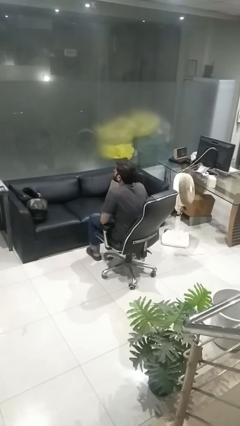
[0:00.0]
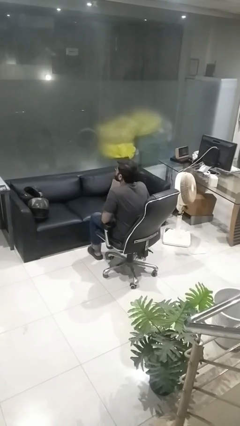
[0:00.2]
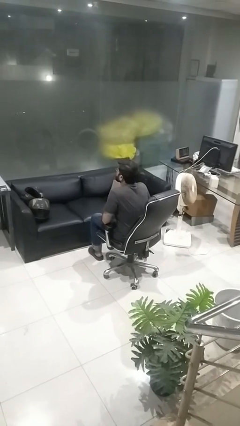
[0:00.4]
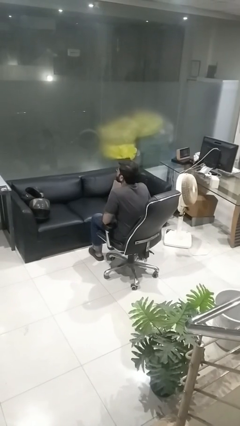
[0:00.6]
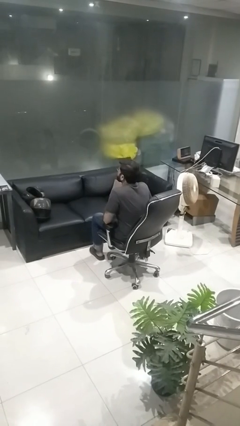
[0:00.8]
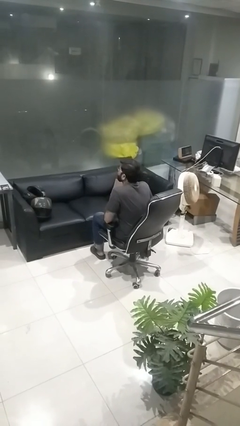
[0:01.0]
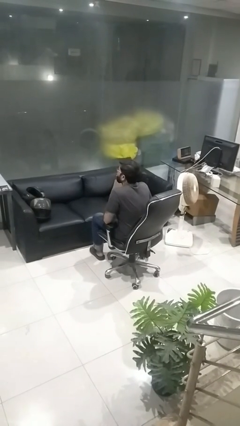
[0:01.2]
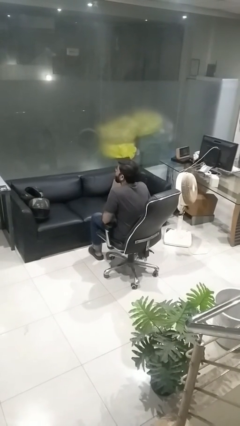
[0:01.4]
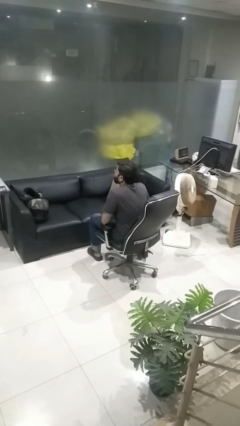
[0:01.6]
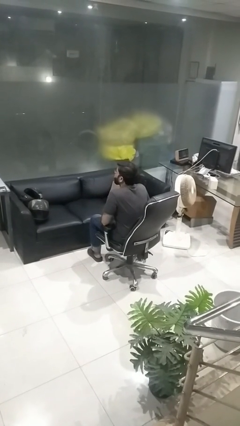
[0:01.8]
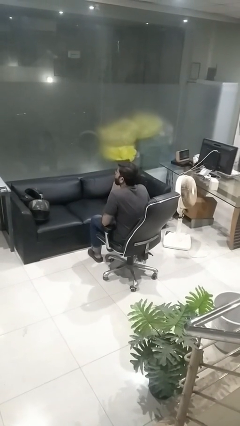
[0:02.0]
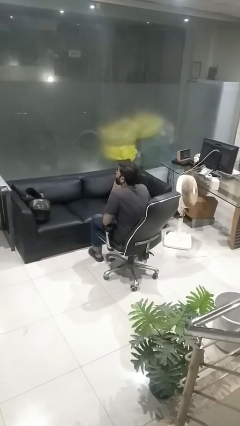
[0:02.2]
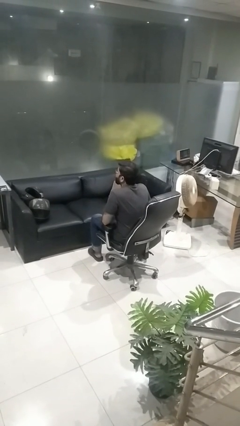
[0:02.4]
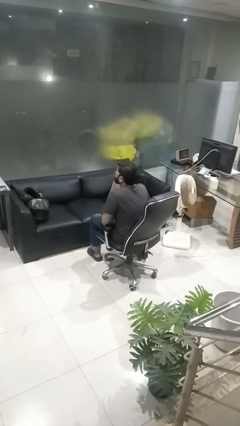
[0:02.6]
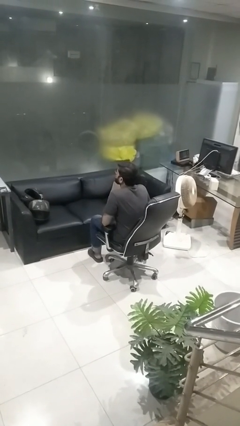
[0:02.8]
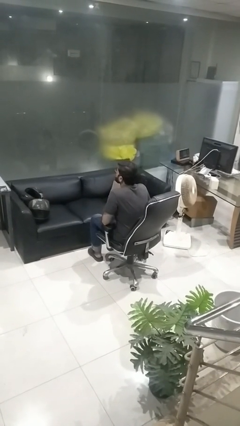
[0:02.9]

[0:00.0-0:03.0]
person sticks out tongue

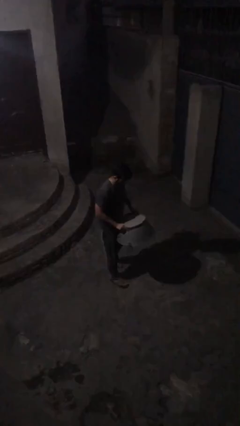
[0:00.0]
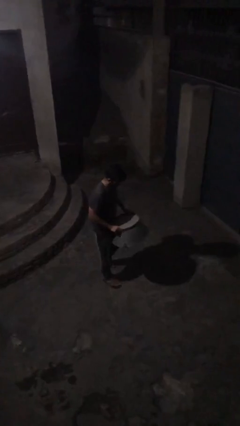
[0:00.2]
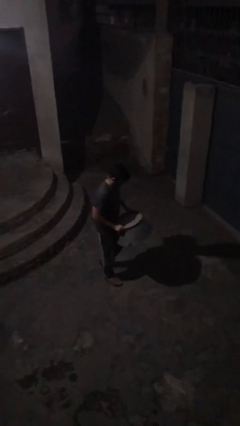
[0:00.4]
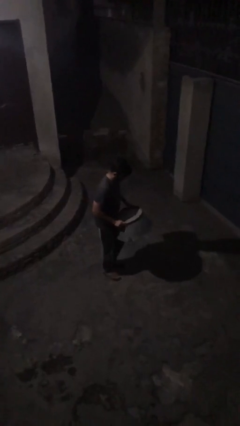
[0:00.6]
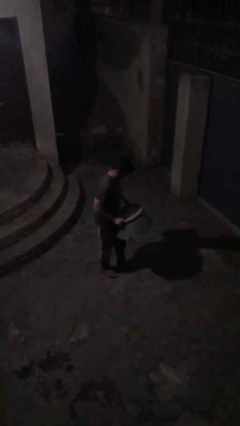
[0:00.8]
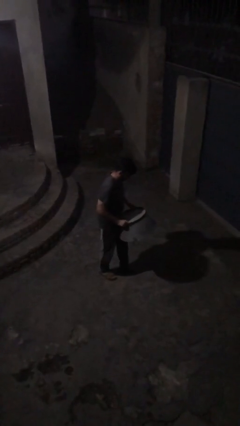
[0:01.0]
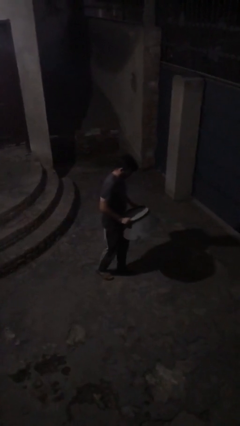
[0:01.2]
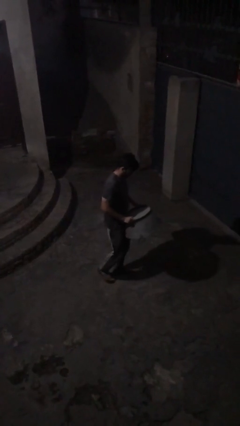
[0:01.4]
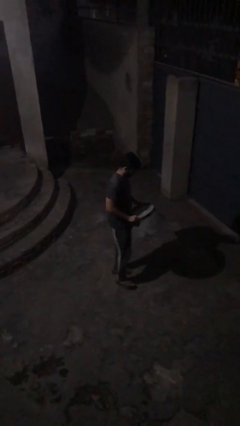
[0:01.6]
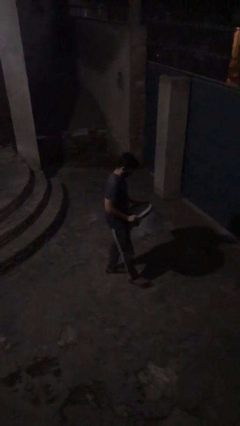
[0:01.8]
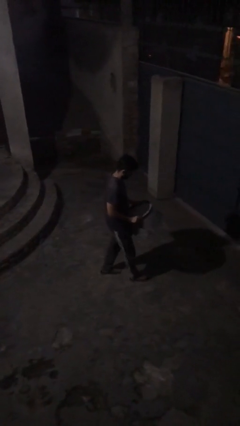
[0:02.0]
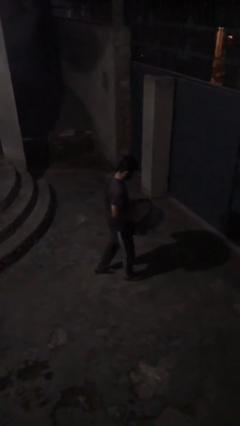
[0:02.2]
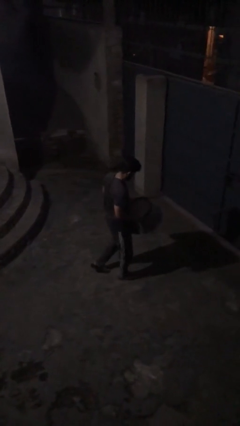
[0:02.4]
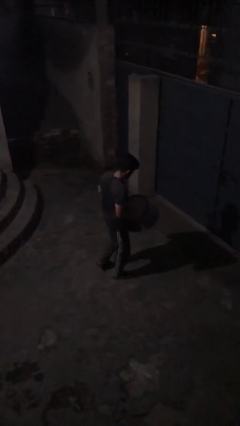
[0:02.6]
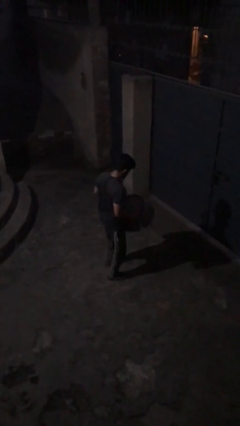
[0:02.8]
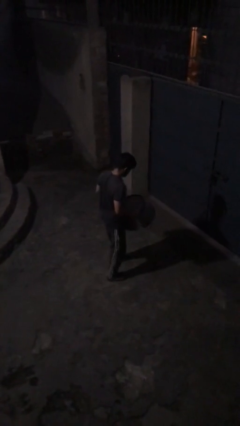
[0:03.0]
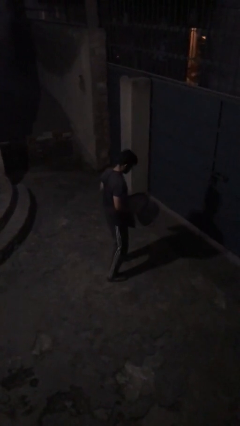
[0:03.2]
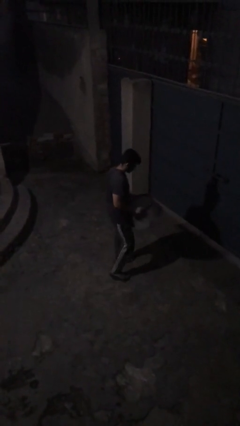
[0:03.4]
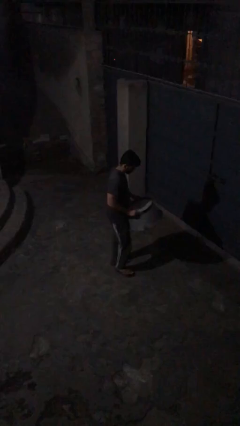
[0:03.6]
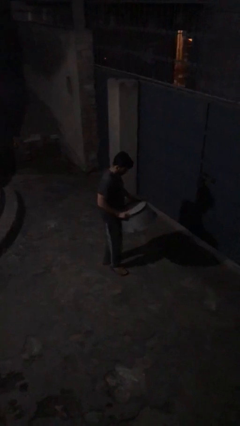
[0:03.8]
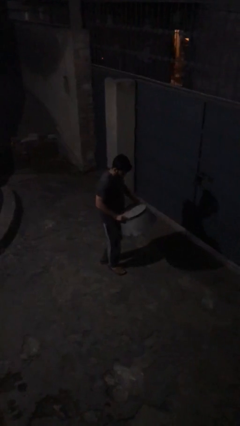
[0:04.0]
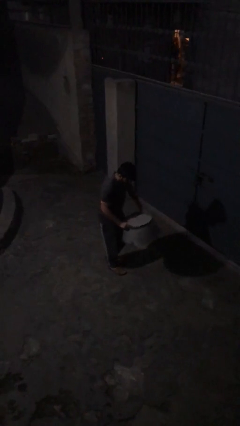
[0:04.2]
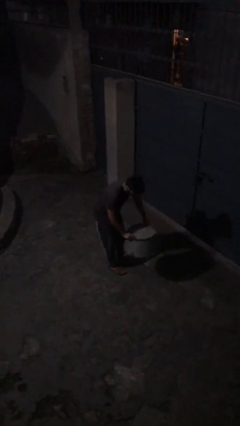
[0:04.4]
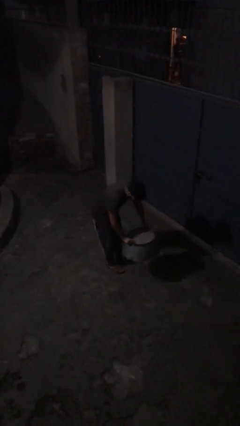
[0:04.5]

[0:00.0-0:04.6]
person carries heavy object

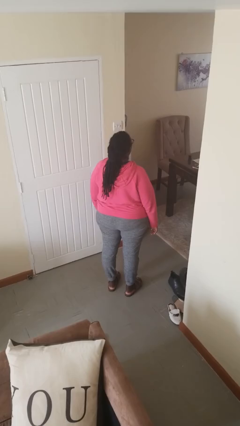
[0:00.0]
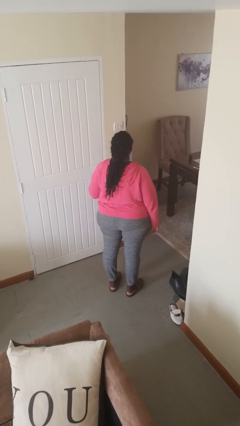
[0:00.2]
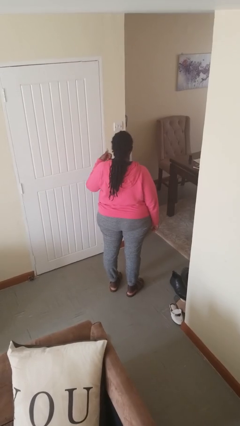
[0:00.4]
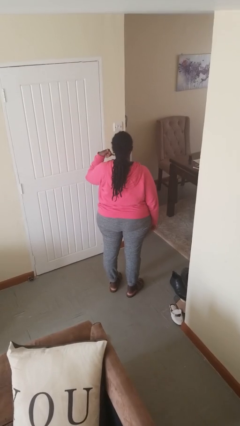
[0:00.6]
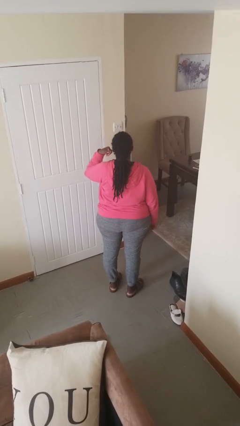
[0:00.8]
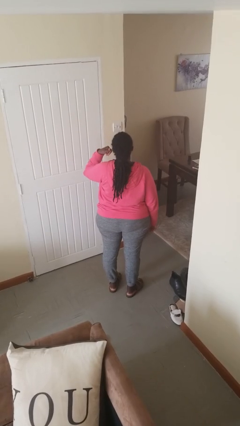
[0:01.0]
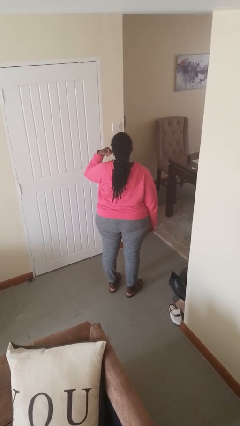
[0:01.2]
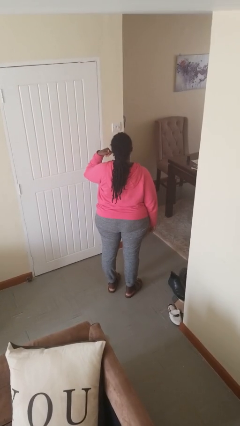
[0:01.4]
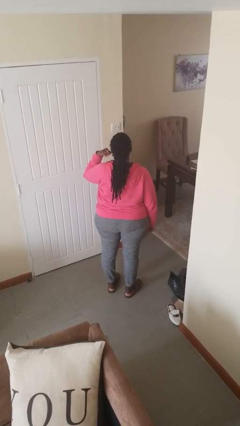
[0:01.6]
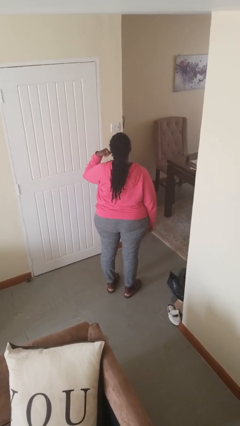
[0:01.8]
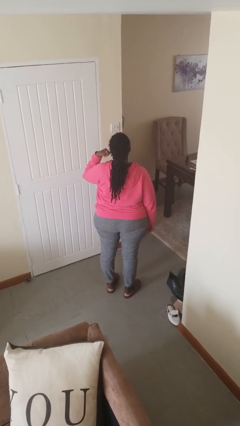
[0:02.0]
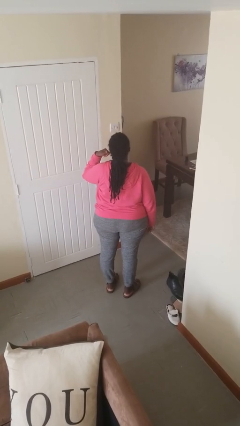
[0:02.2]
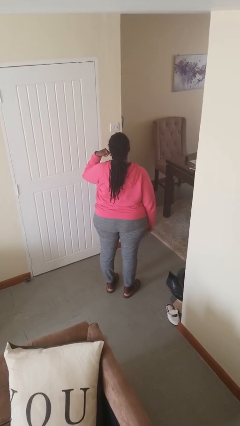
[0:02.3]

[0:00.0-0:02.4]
person gestures call me

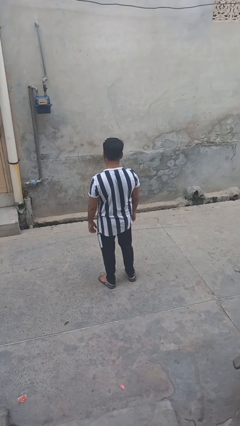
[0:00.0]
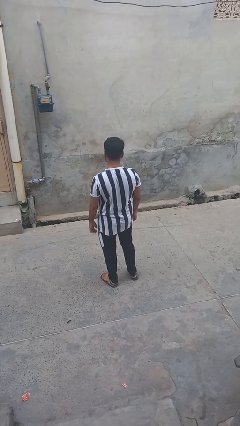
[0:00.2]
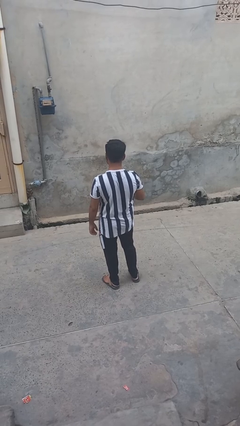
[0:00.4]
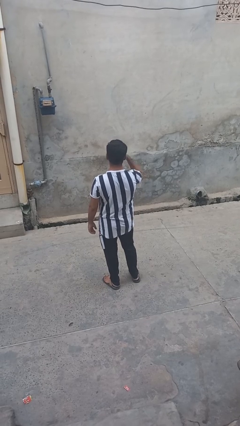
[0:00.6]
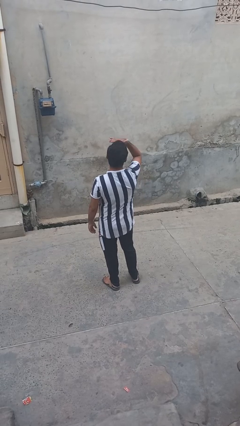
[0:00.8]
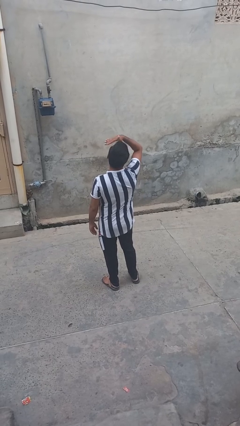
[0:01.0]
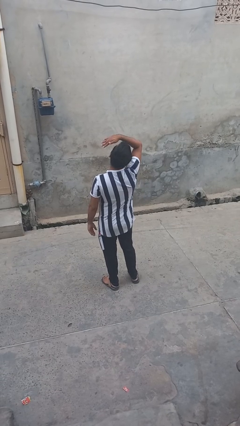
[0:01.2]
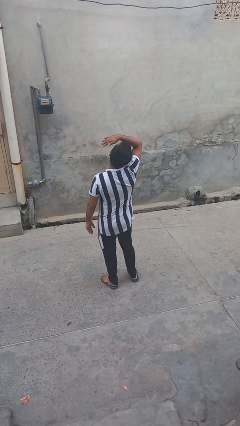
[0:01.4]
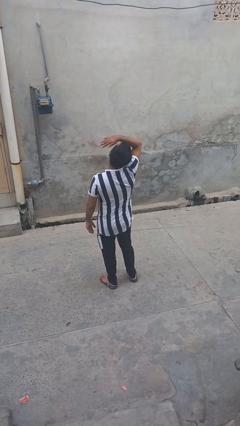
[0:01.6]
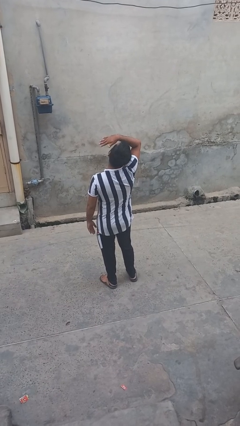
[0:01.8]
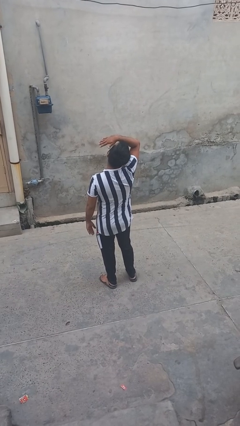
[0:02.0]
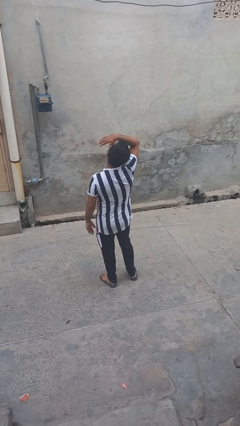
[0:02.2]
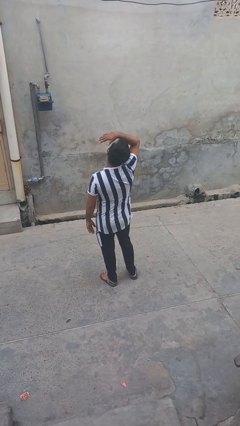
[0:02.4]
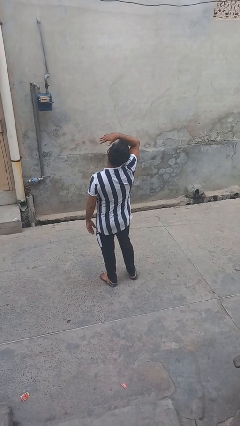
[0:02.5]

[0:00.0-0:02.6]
person shades eyes

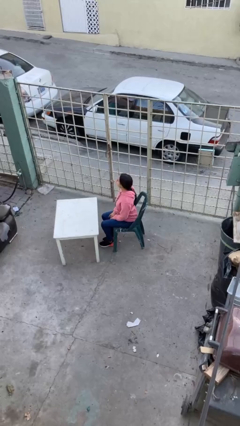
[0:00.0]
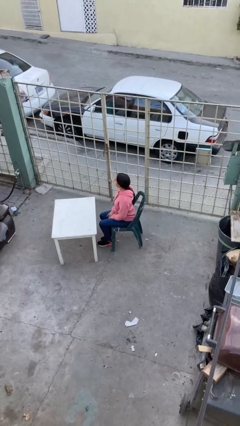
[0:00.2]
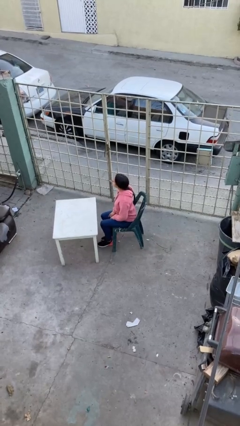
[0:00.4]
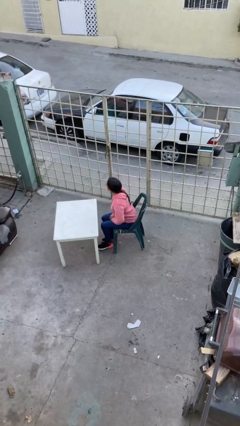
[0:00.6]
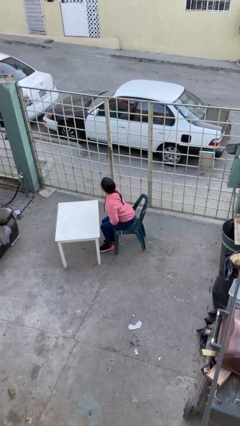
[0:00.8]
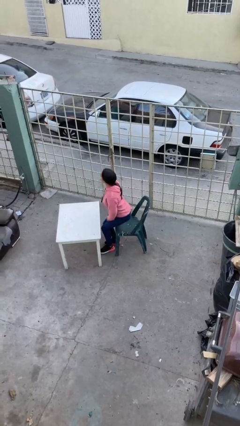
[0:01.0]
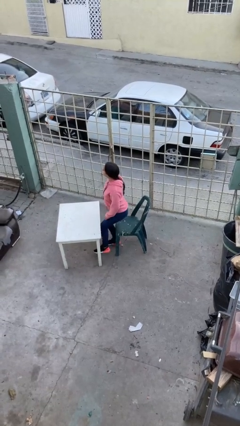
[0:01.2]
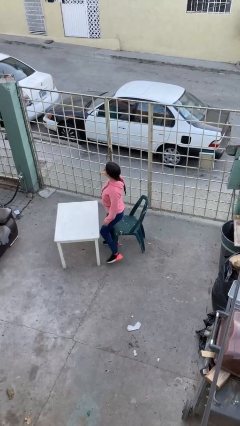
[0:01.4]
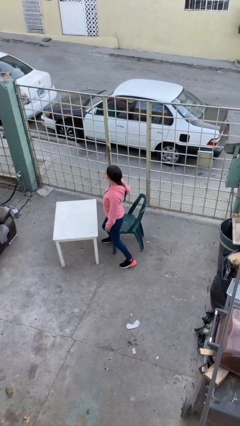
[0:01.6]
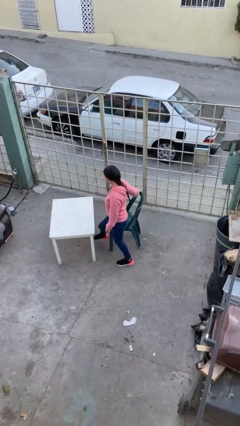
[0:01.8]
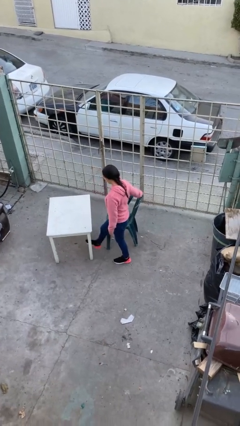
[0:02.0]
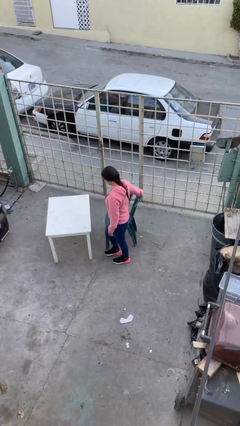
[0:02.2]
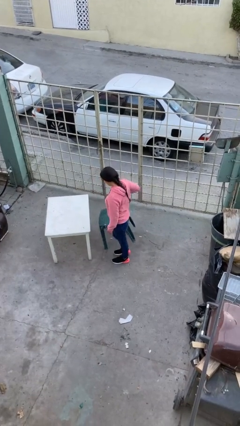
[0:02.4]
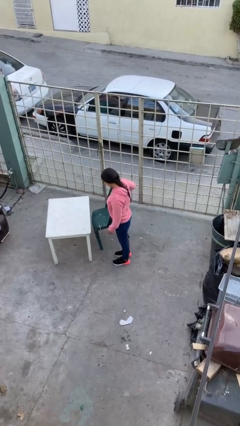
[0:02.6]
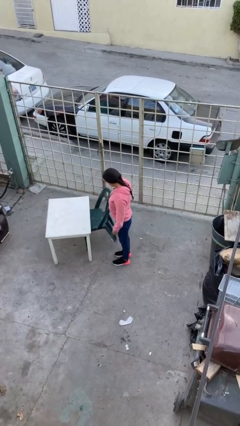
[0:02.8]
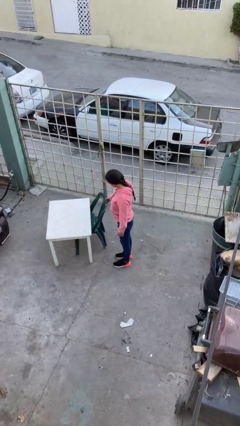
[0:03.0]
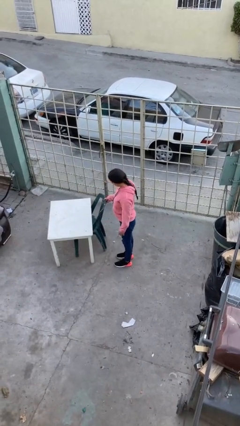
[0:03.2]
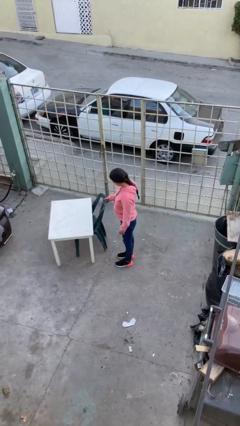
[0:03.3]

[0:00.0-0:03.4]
person stands up

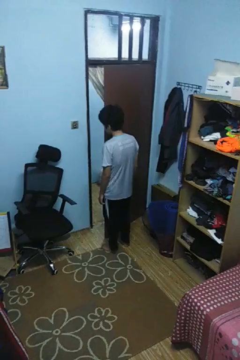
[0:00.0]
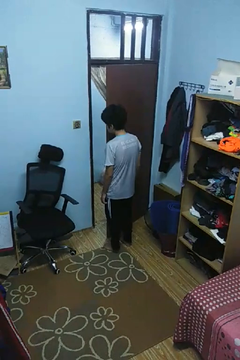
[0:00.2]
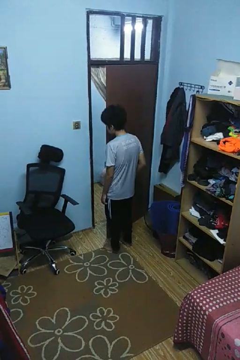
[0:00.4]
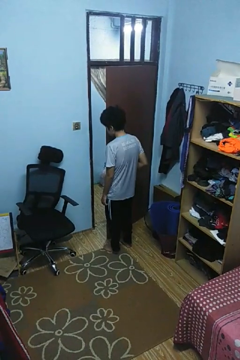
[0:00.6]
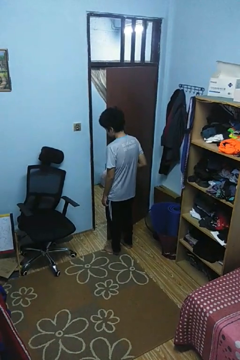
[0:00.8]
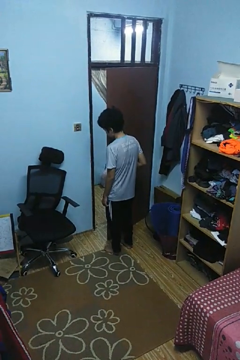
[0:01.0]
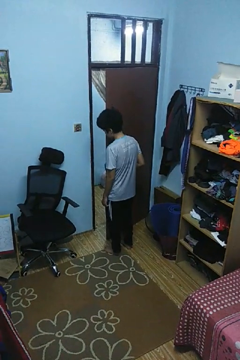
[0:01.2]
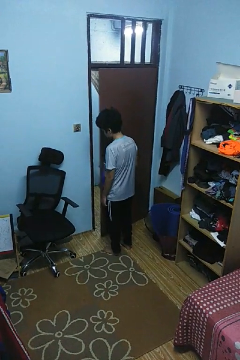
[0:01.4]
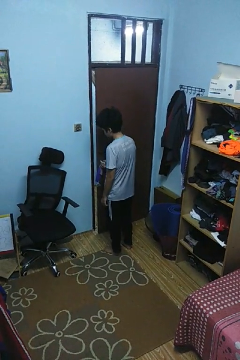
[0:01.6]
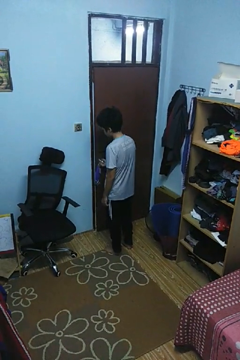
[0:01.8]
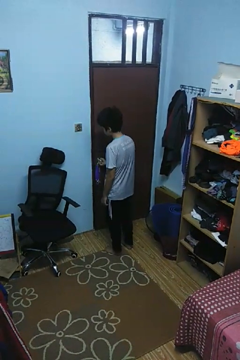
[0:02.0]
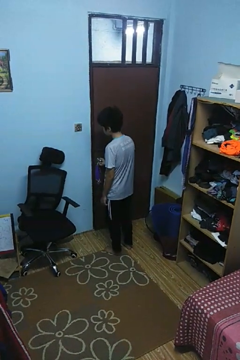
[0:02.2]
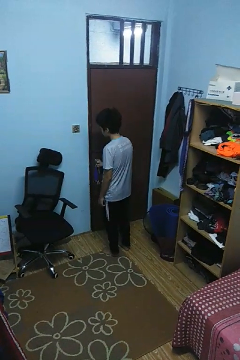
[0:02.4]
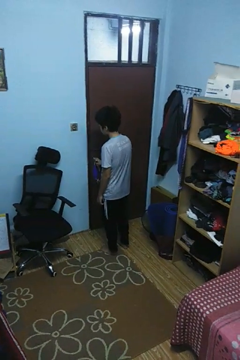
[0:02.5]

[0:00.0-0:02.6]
person closes facility door
